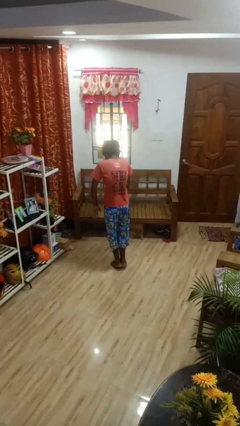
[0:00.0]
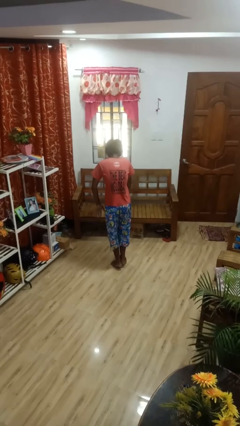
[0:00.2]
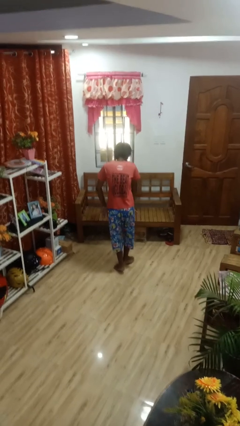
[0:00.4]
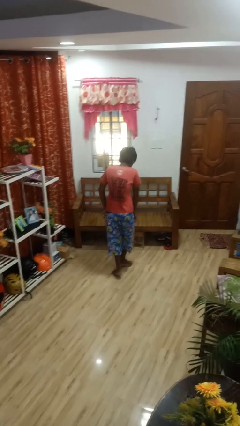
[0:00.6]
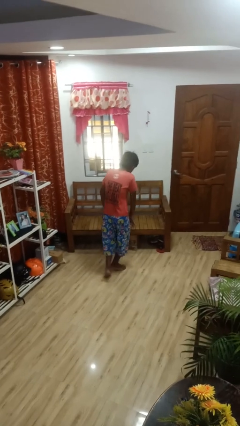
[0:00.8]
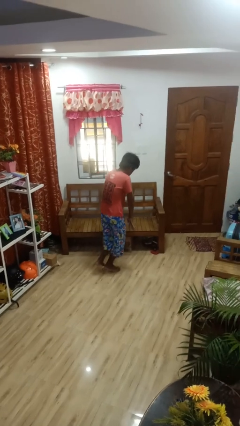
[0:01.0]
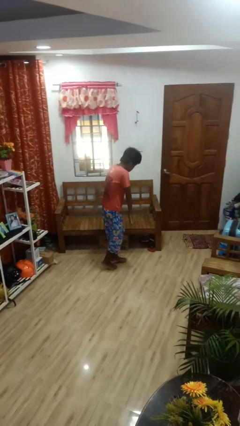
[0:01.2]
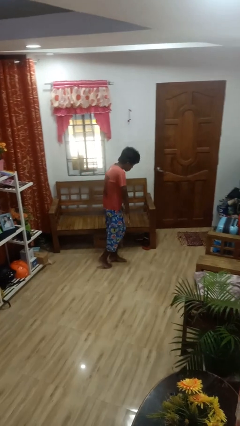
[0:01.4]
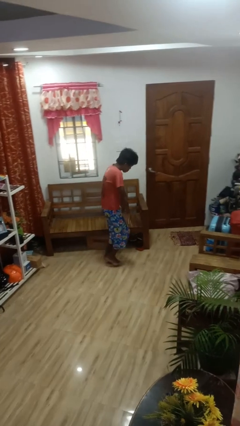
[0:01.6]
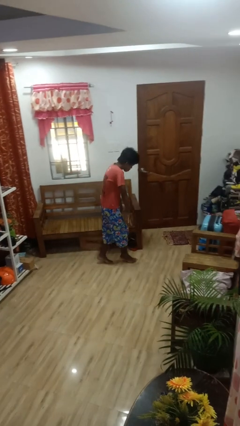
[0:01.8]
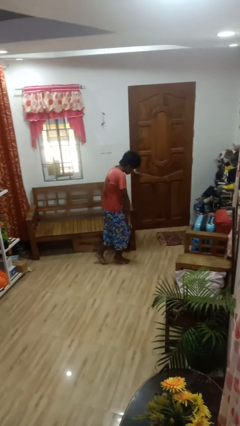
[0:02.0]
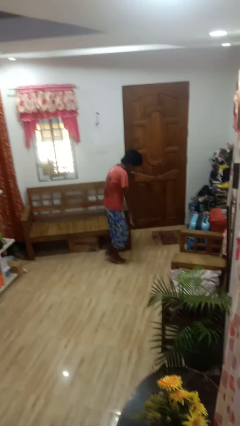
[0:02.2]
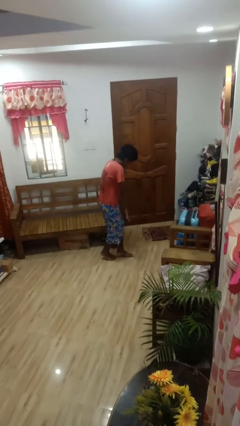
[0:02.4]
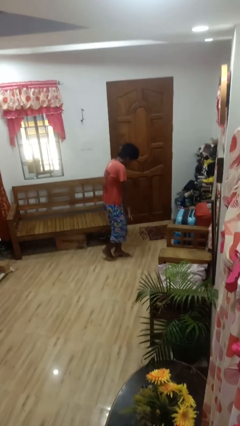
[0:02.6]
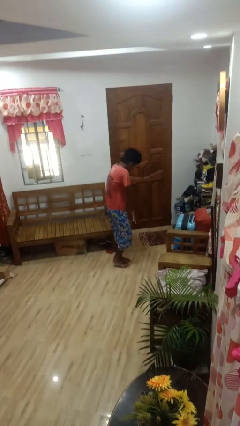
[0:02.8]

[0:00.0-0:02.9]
person walks tiptoe

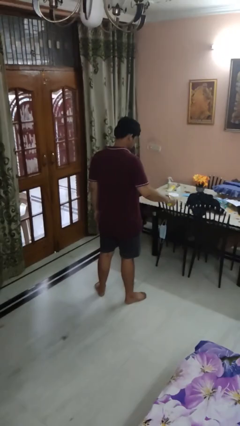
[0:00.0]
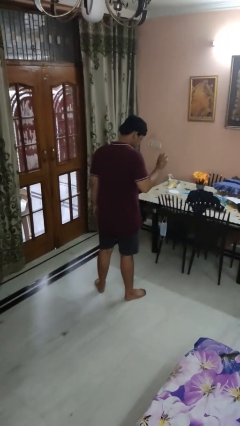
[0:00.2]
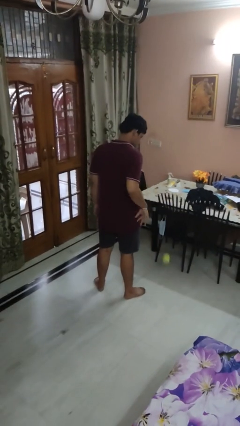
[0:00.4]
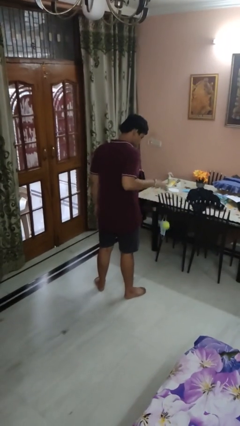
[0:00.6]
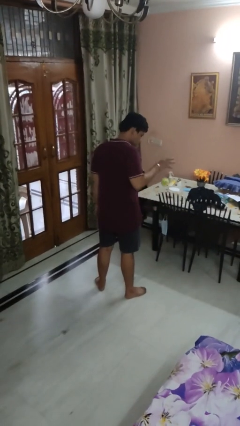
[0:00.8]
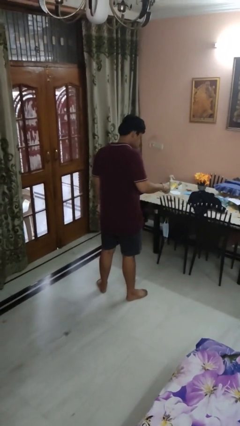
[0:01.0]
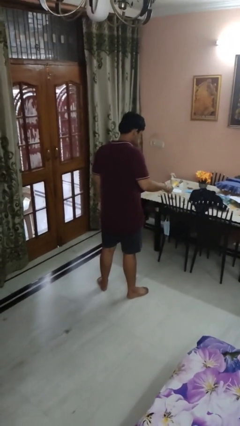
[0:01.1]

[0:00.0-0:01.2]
person bounces ball on floor

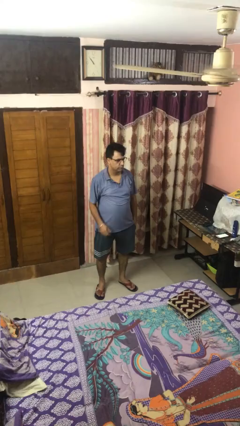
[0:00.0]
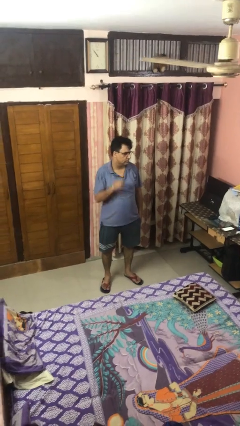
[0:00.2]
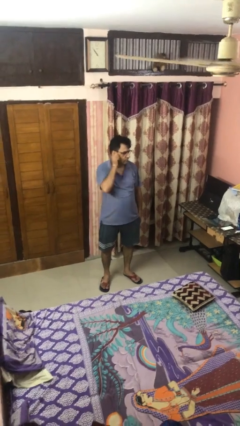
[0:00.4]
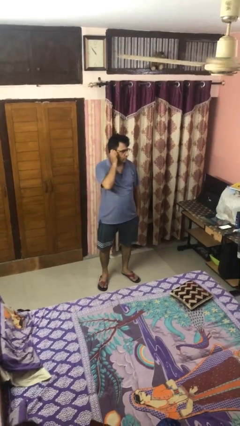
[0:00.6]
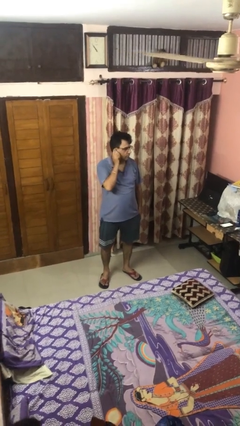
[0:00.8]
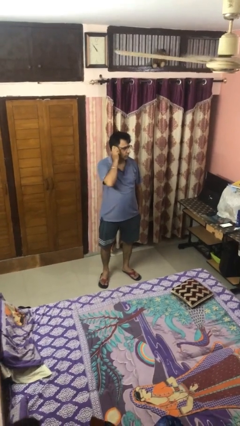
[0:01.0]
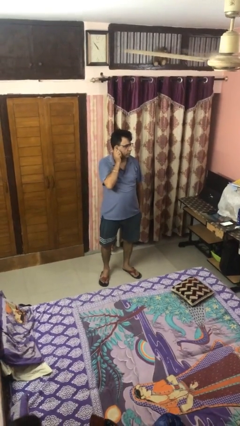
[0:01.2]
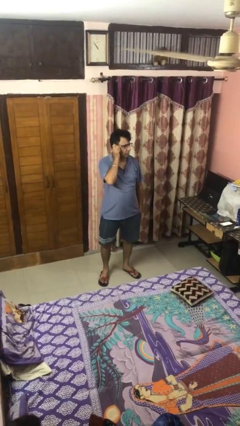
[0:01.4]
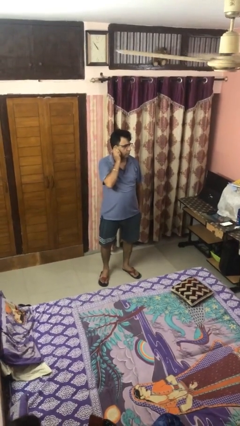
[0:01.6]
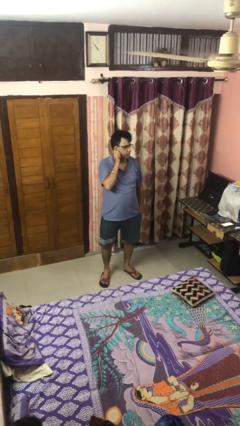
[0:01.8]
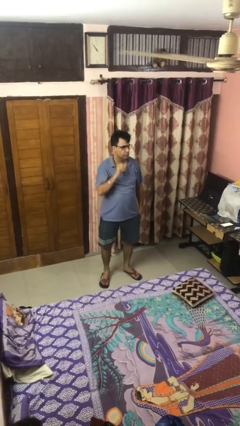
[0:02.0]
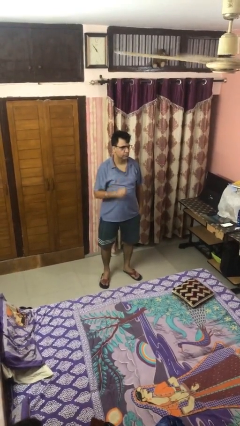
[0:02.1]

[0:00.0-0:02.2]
person touches earlobe

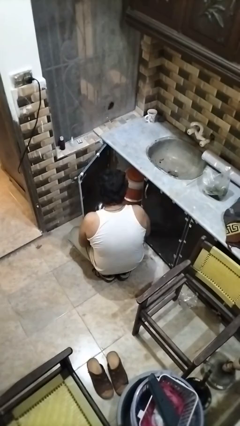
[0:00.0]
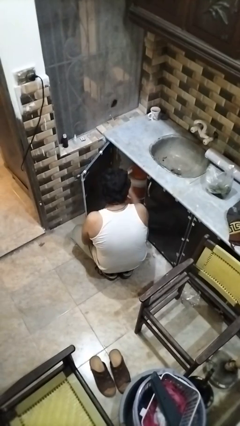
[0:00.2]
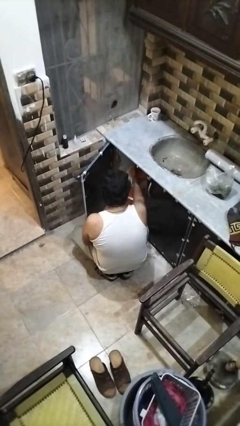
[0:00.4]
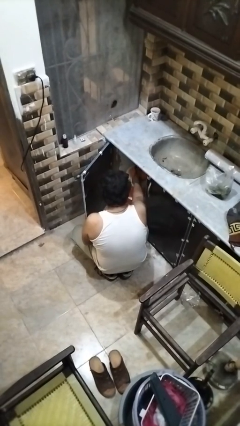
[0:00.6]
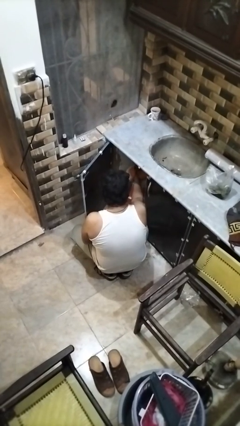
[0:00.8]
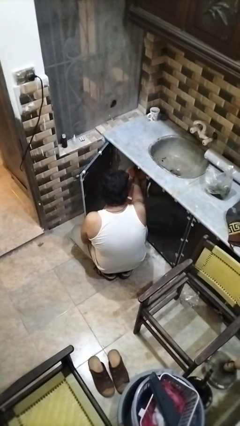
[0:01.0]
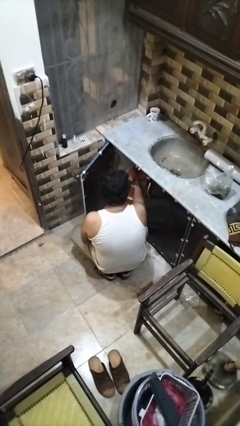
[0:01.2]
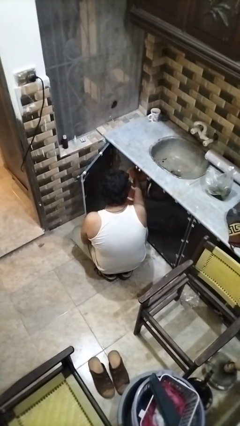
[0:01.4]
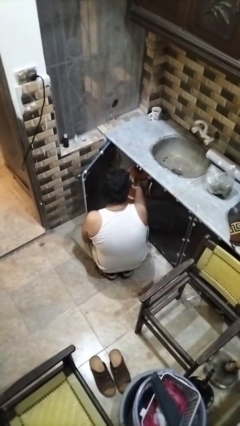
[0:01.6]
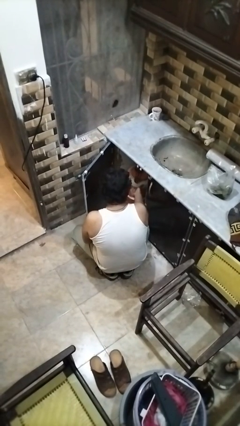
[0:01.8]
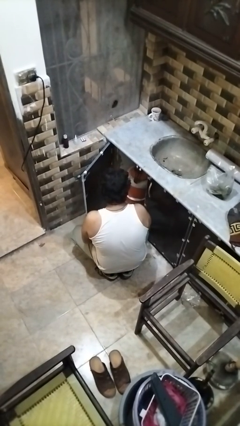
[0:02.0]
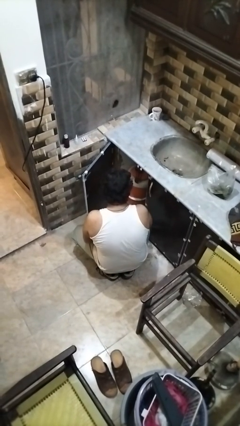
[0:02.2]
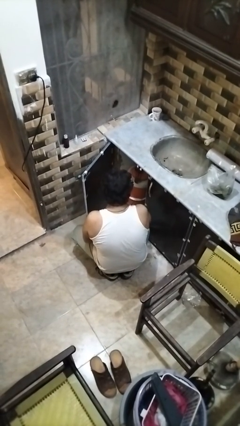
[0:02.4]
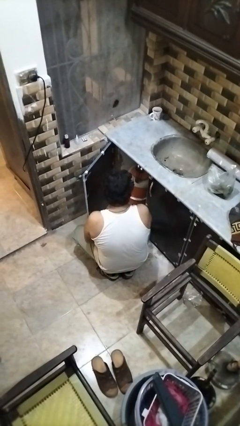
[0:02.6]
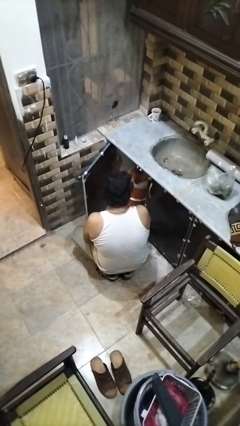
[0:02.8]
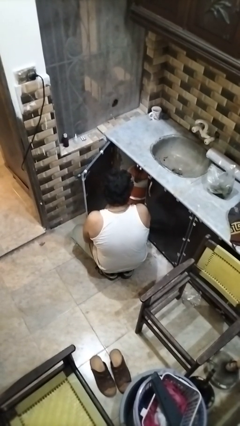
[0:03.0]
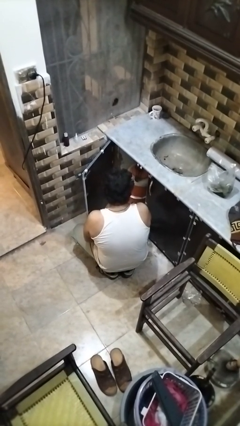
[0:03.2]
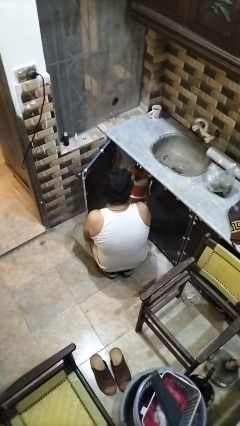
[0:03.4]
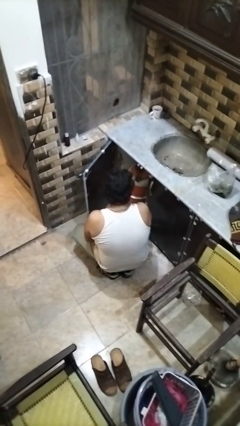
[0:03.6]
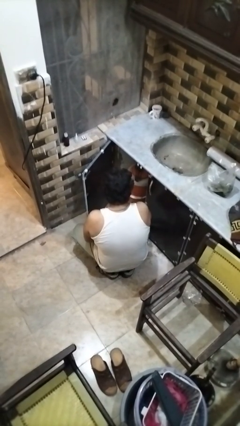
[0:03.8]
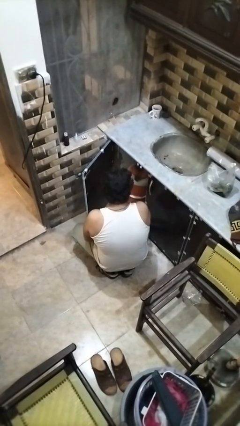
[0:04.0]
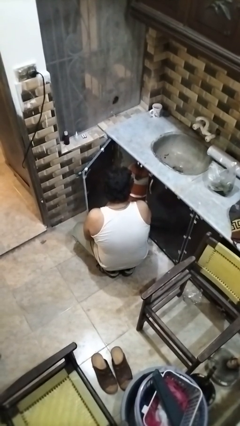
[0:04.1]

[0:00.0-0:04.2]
person puts object into kitchen drawer

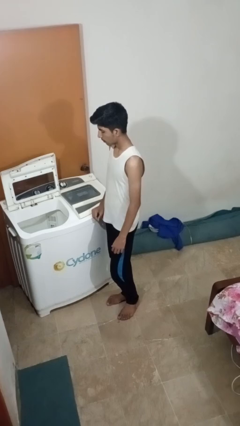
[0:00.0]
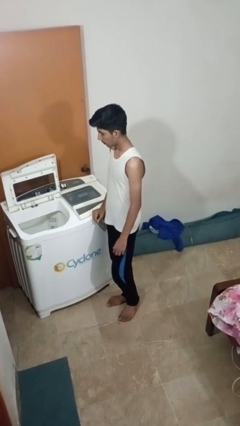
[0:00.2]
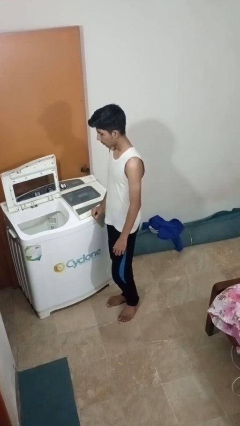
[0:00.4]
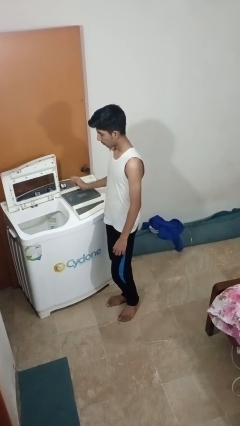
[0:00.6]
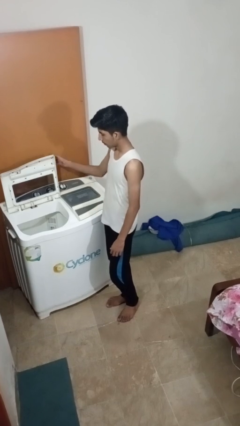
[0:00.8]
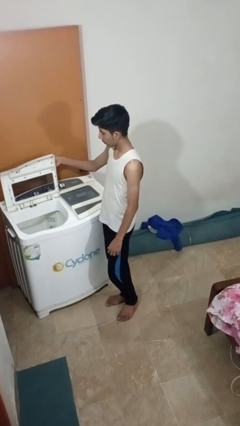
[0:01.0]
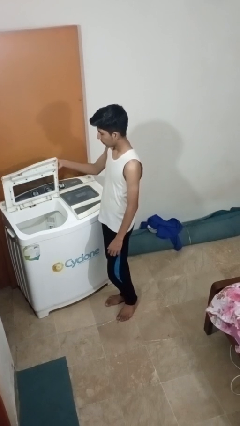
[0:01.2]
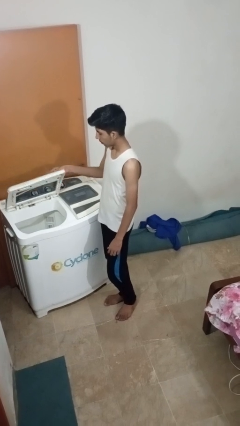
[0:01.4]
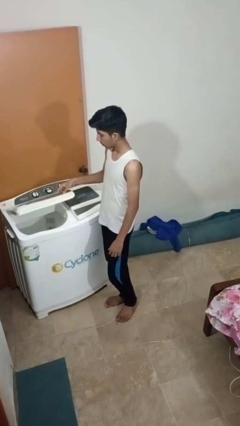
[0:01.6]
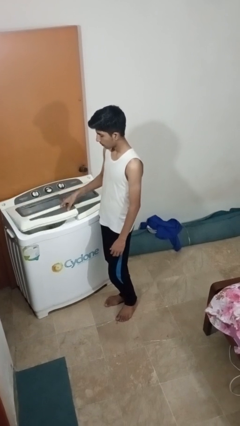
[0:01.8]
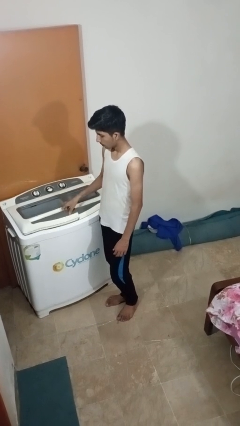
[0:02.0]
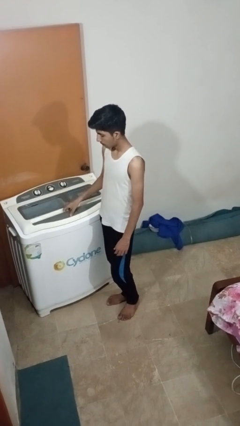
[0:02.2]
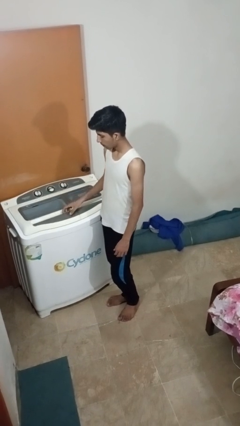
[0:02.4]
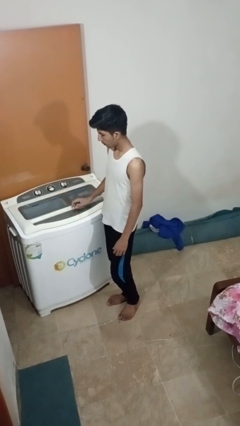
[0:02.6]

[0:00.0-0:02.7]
person closes clothes washer

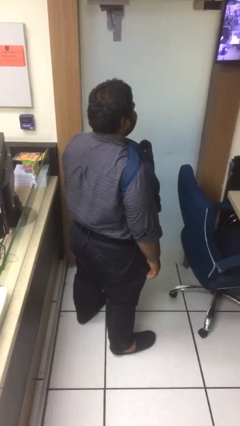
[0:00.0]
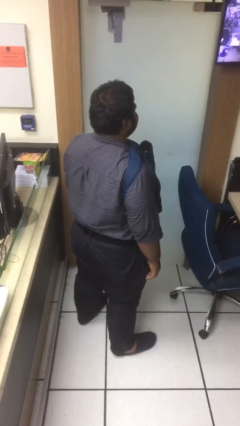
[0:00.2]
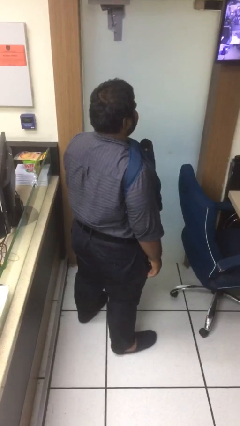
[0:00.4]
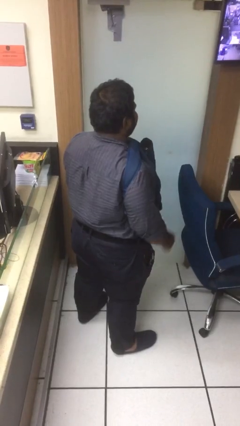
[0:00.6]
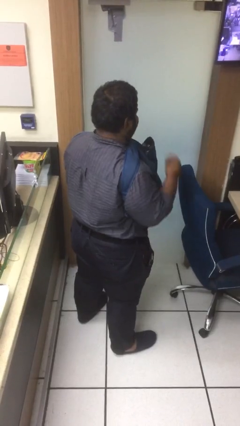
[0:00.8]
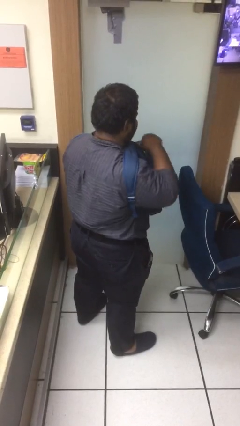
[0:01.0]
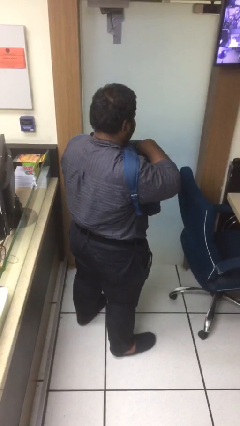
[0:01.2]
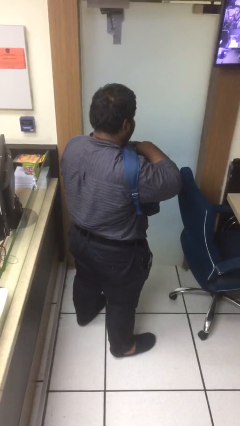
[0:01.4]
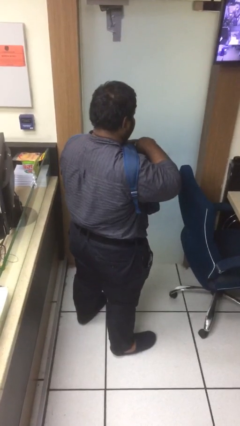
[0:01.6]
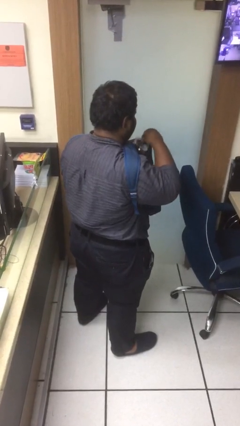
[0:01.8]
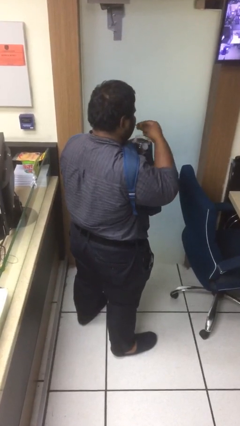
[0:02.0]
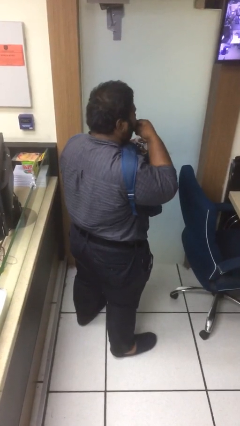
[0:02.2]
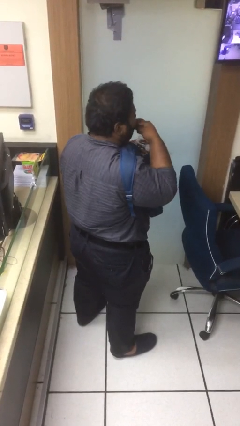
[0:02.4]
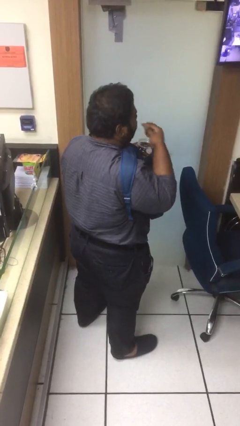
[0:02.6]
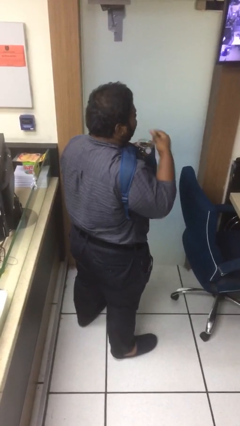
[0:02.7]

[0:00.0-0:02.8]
person eats snack from bag

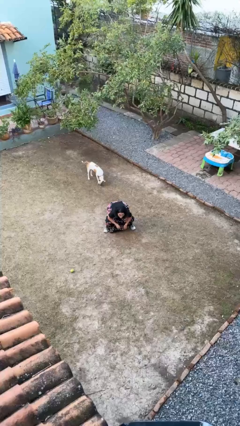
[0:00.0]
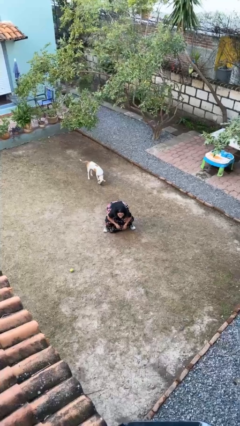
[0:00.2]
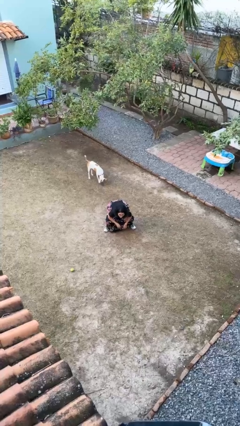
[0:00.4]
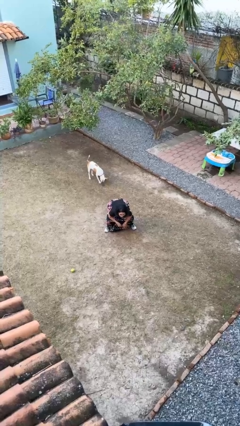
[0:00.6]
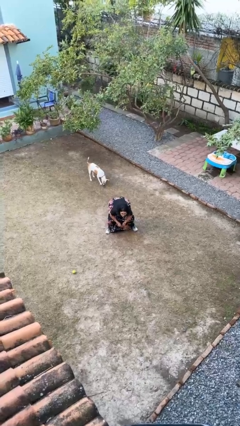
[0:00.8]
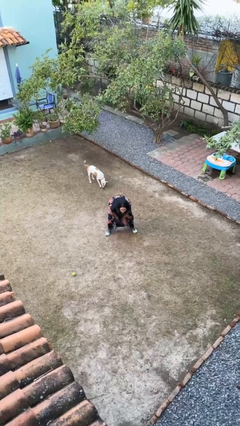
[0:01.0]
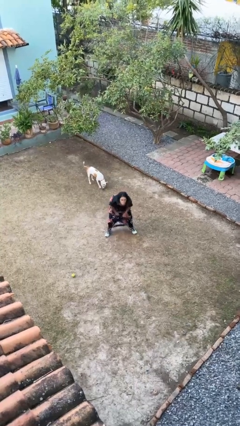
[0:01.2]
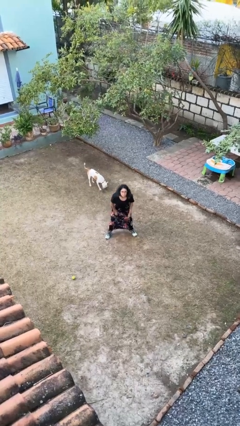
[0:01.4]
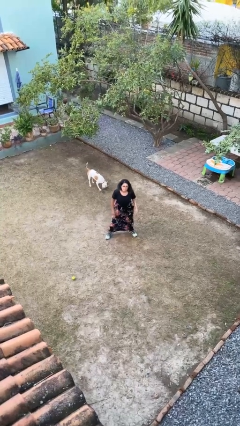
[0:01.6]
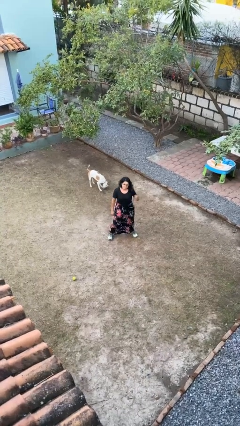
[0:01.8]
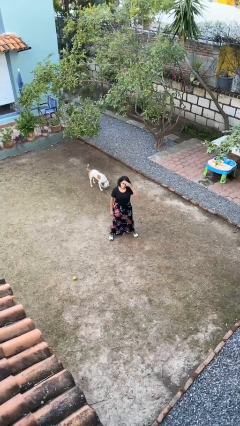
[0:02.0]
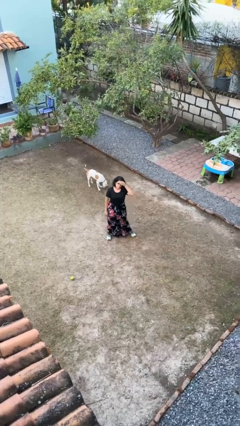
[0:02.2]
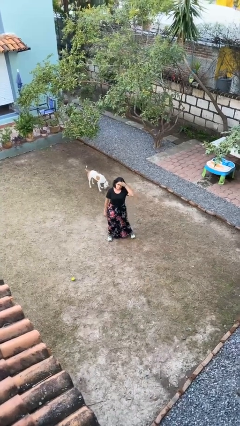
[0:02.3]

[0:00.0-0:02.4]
person stands up
